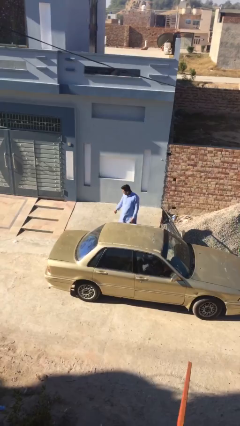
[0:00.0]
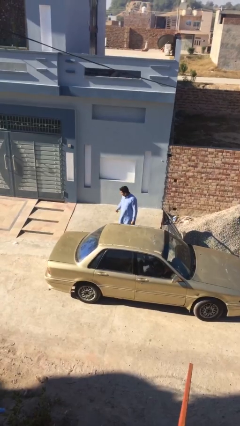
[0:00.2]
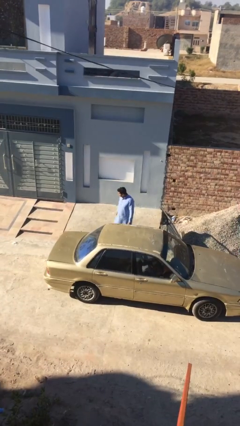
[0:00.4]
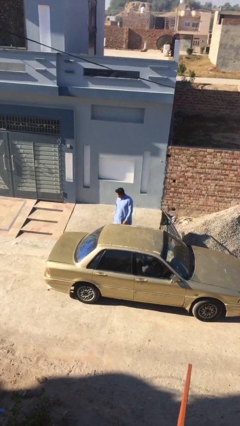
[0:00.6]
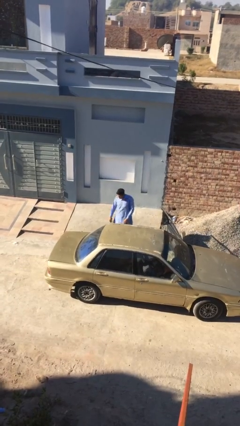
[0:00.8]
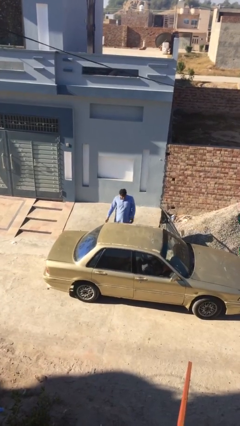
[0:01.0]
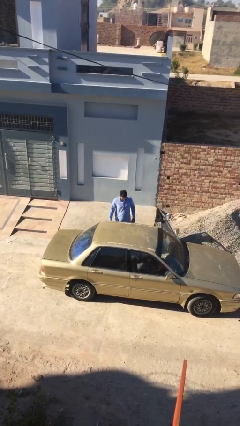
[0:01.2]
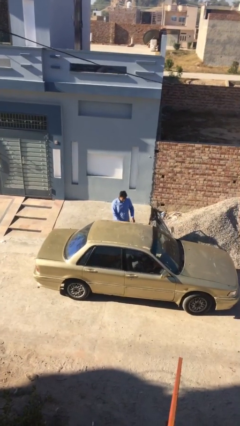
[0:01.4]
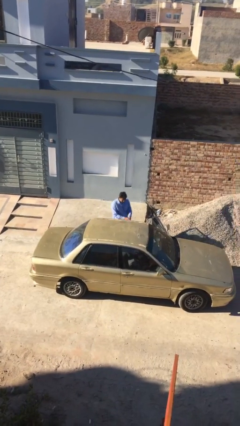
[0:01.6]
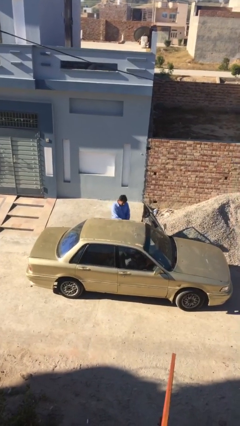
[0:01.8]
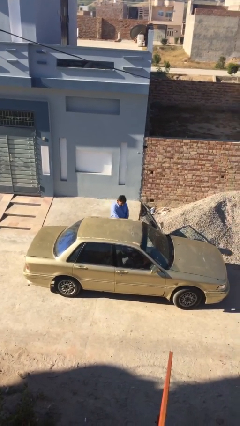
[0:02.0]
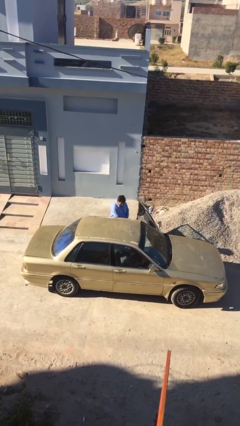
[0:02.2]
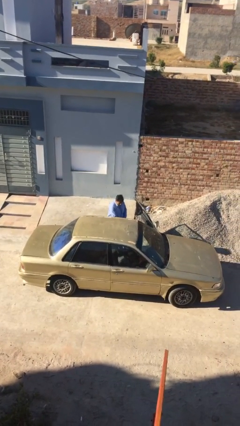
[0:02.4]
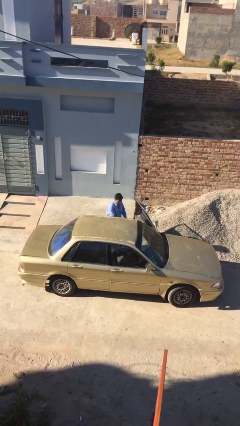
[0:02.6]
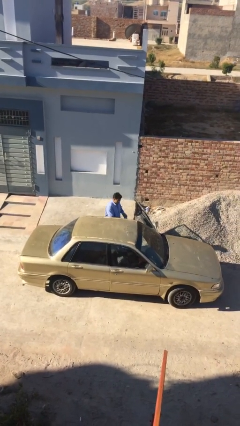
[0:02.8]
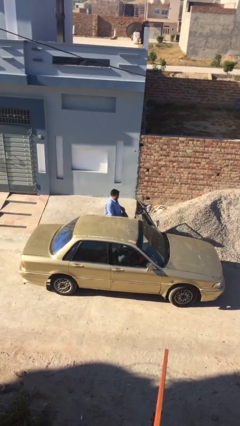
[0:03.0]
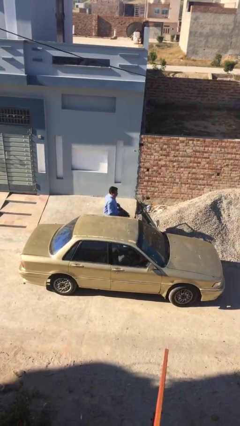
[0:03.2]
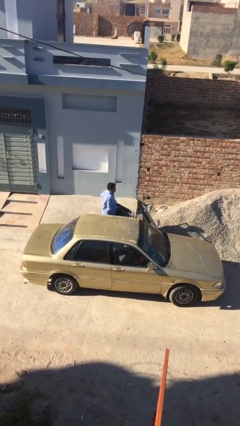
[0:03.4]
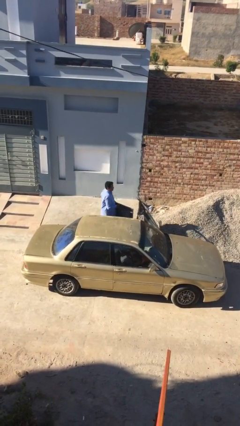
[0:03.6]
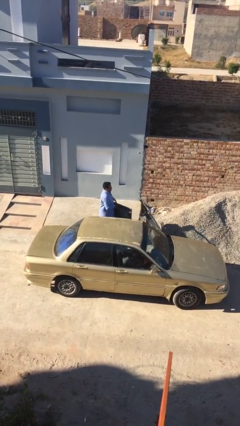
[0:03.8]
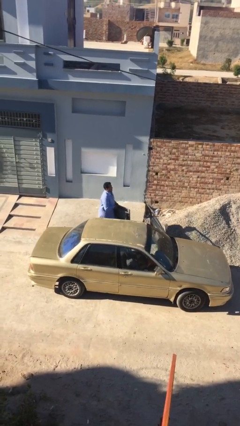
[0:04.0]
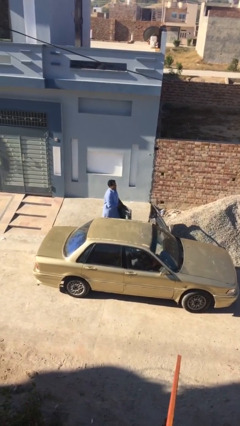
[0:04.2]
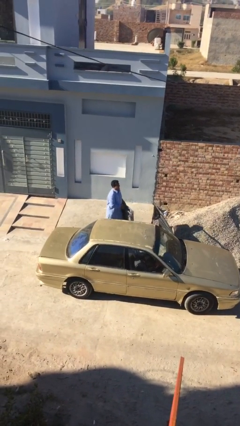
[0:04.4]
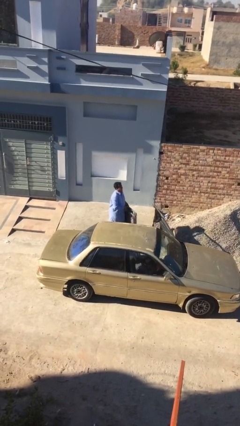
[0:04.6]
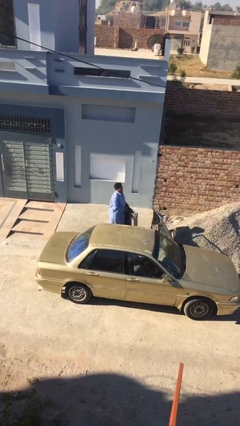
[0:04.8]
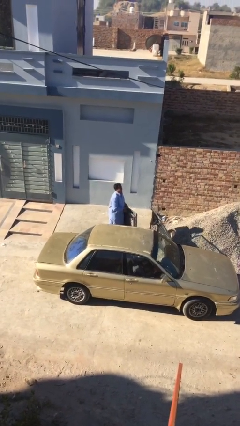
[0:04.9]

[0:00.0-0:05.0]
person unloads car

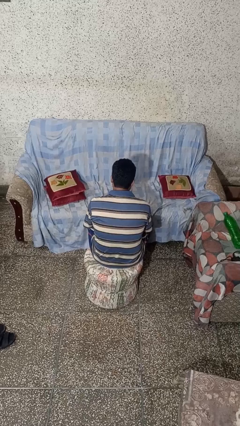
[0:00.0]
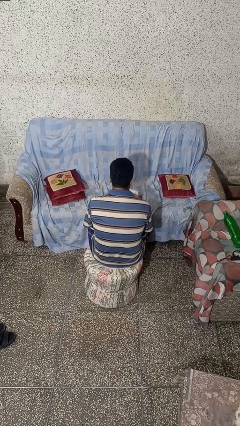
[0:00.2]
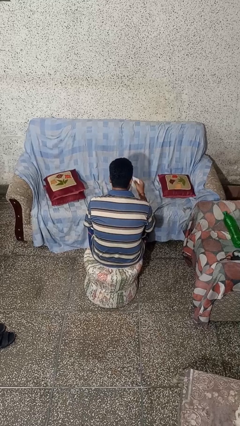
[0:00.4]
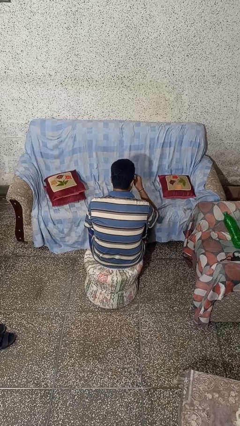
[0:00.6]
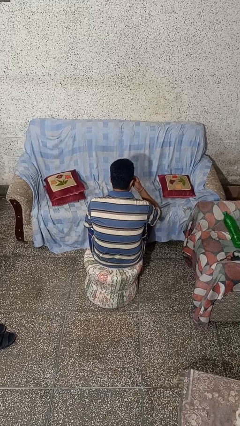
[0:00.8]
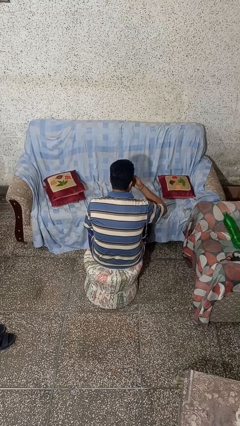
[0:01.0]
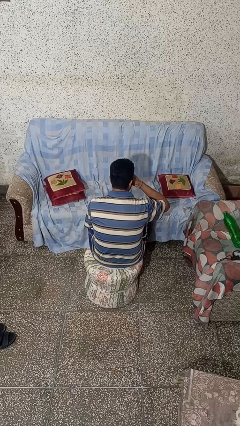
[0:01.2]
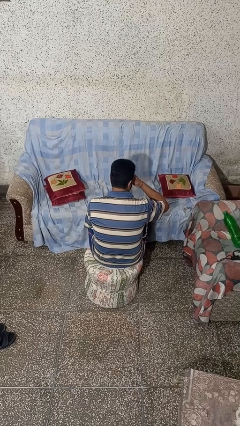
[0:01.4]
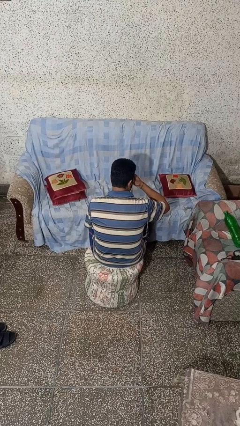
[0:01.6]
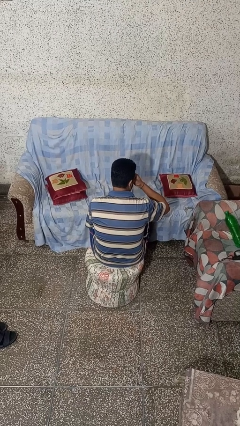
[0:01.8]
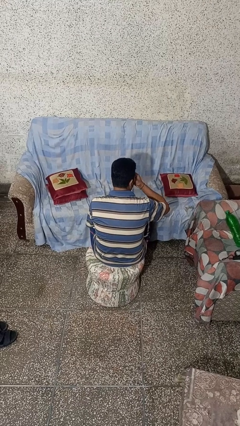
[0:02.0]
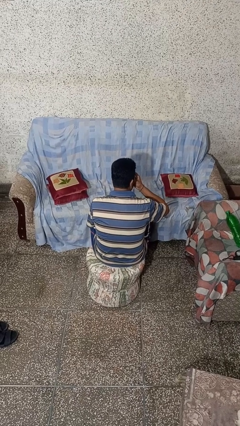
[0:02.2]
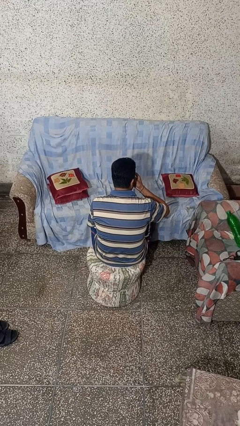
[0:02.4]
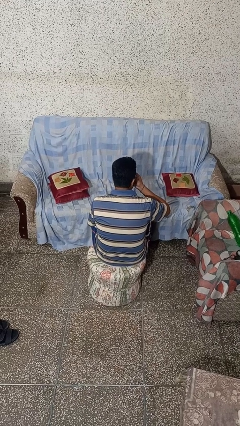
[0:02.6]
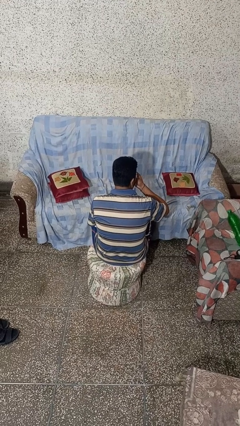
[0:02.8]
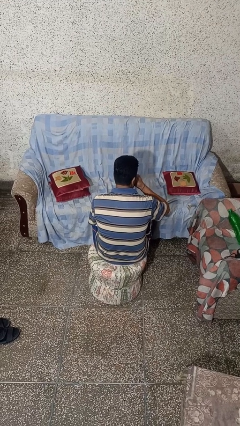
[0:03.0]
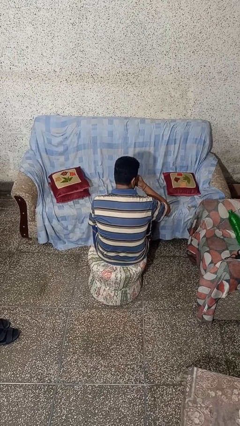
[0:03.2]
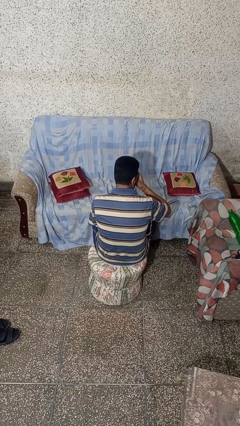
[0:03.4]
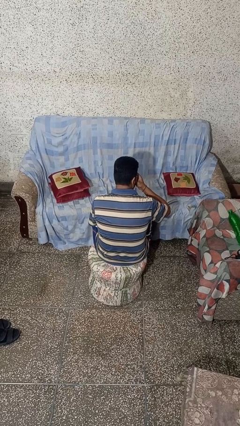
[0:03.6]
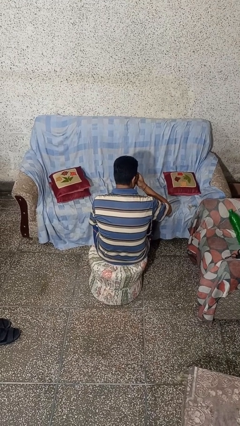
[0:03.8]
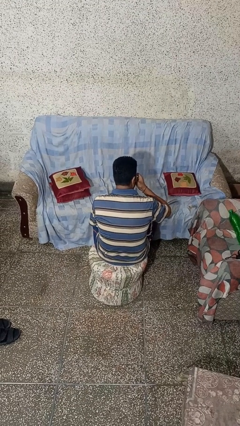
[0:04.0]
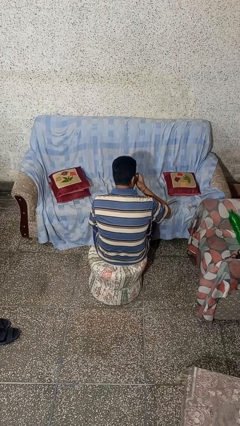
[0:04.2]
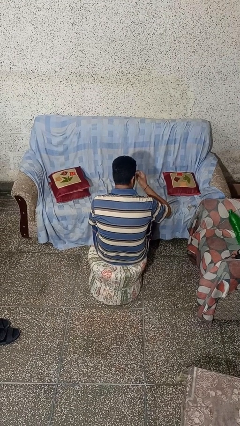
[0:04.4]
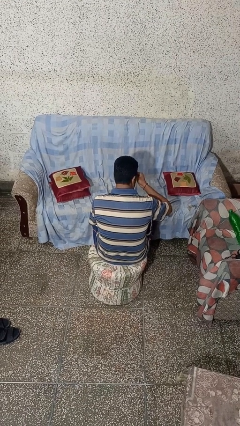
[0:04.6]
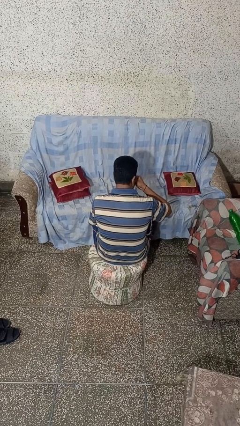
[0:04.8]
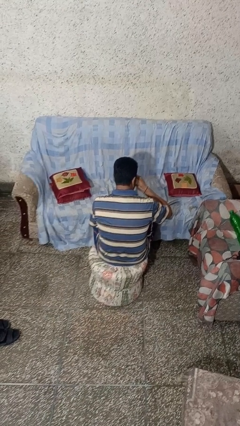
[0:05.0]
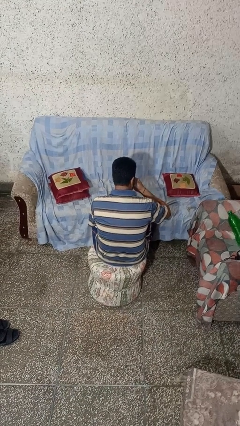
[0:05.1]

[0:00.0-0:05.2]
person blows nose

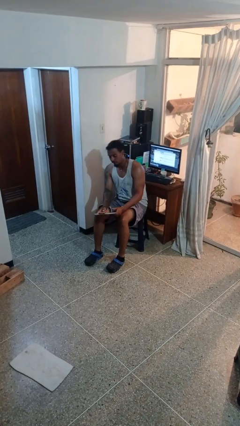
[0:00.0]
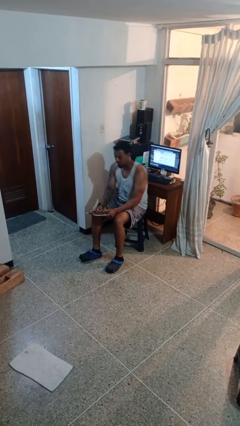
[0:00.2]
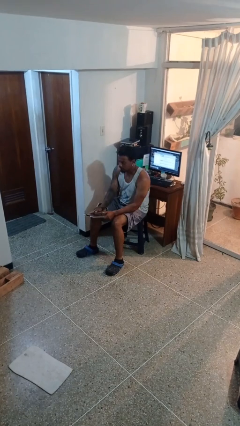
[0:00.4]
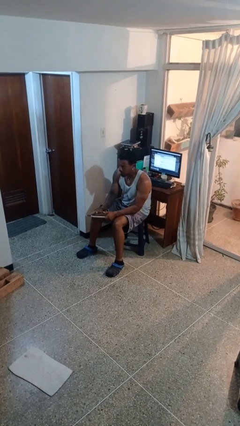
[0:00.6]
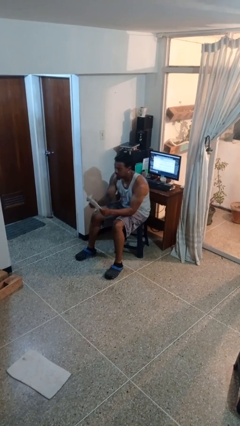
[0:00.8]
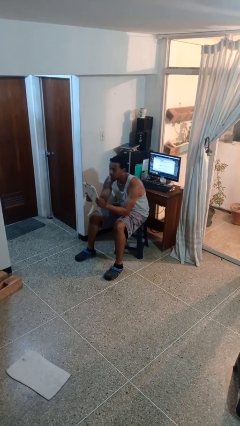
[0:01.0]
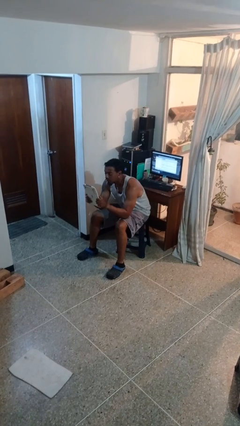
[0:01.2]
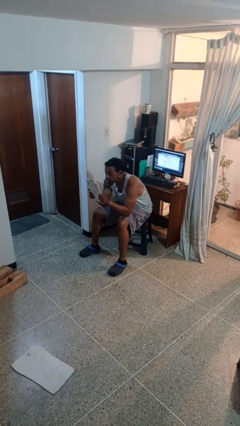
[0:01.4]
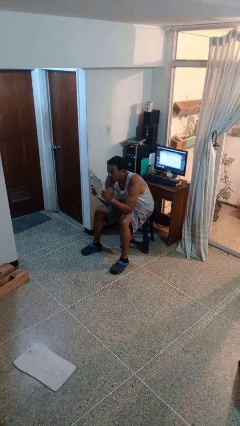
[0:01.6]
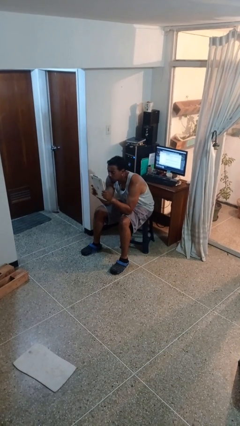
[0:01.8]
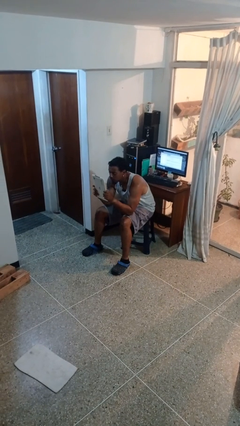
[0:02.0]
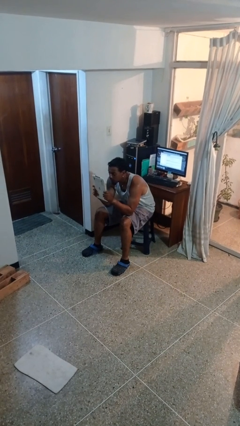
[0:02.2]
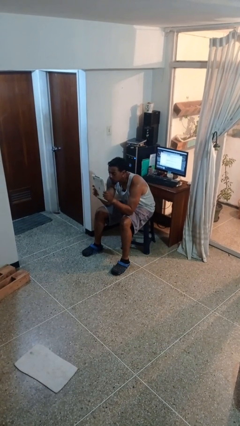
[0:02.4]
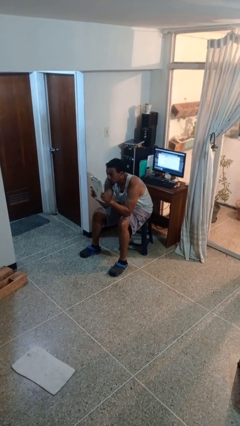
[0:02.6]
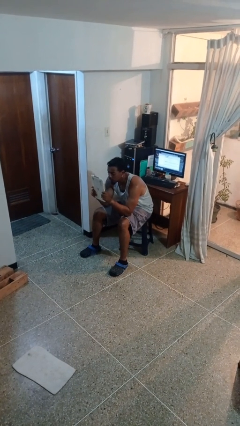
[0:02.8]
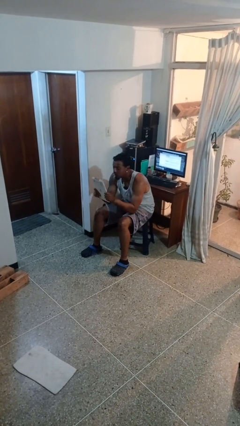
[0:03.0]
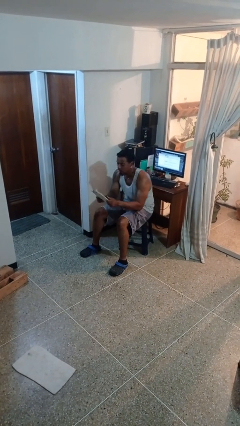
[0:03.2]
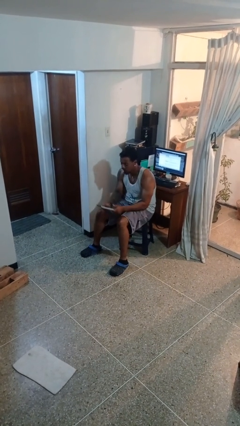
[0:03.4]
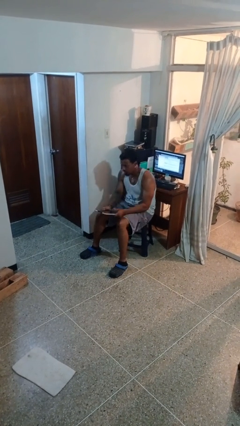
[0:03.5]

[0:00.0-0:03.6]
person interacts with tablet

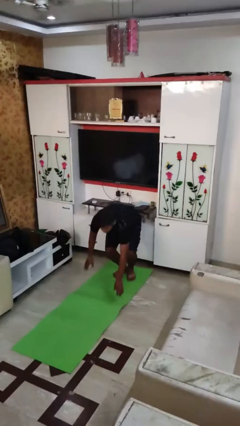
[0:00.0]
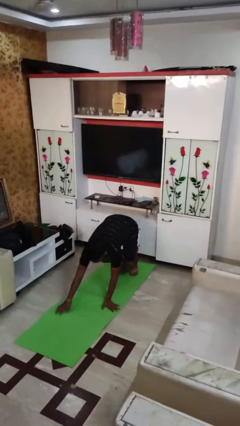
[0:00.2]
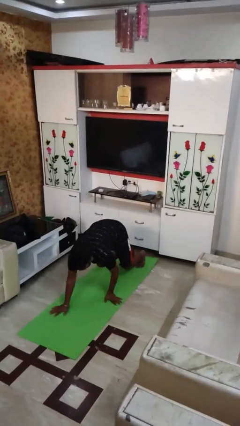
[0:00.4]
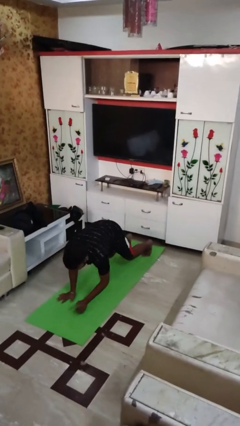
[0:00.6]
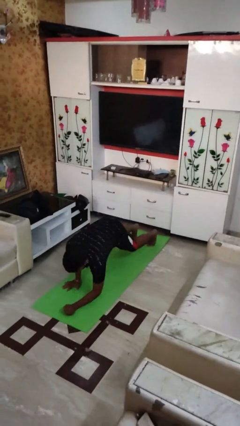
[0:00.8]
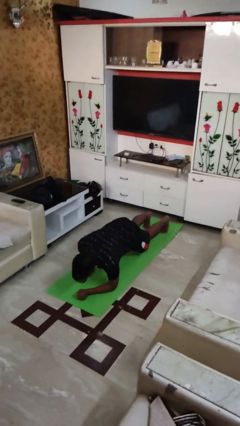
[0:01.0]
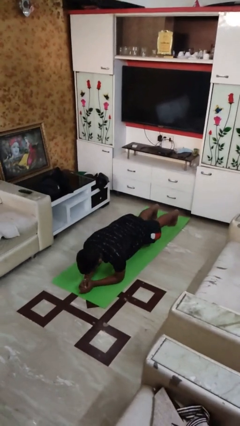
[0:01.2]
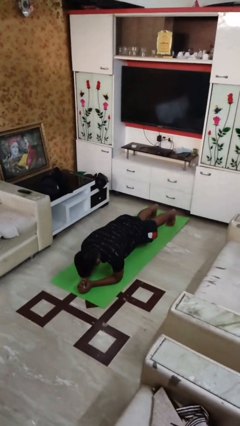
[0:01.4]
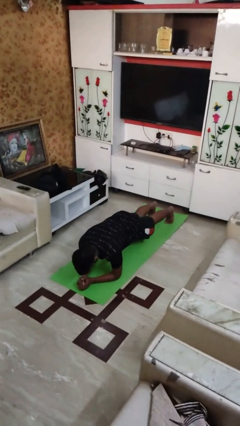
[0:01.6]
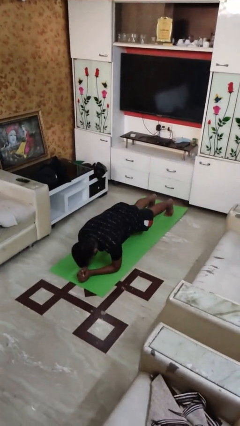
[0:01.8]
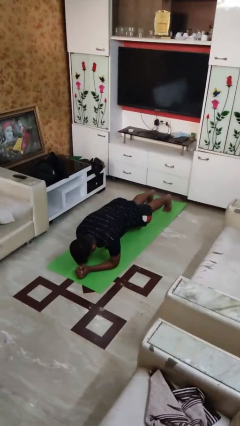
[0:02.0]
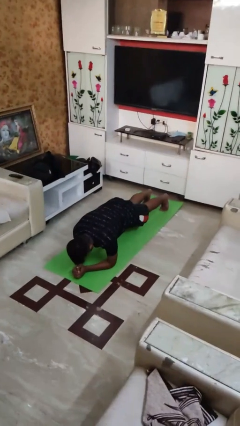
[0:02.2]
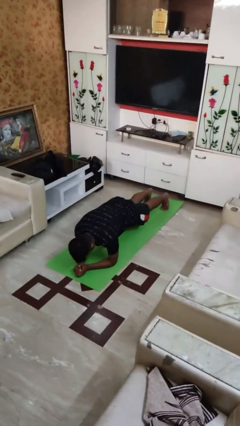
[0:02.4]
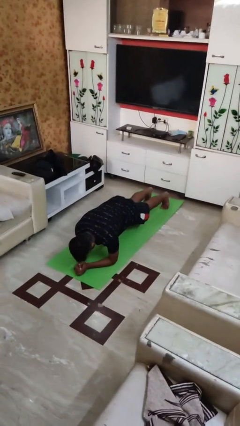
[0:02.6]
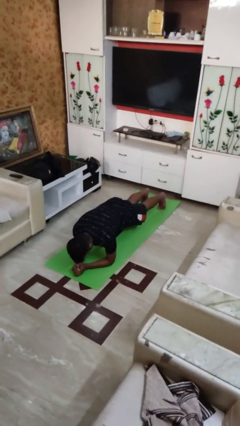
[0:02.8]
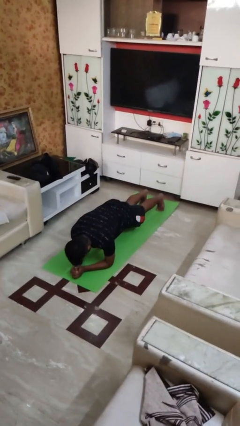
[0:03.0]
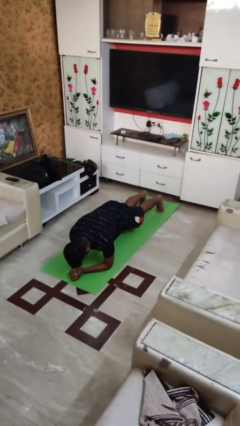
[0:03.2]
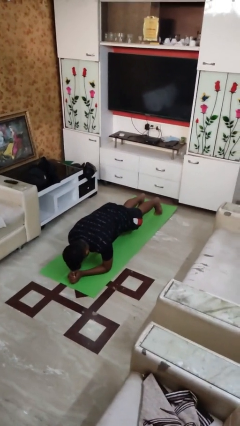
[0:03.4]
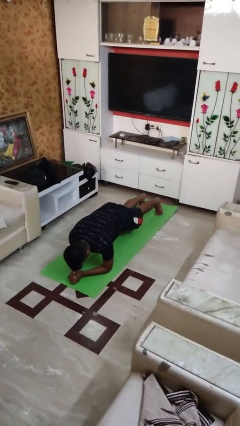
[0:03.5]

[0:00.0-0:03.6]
person exercises with plank

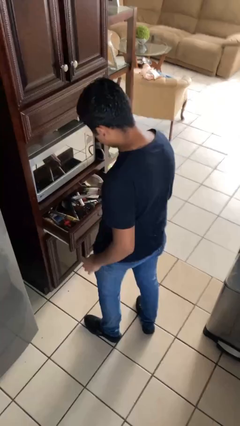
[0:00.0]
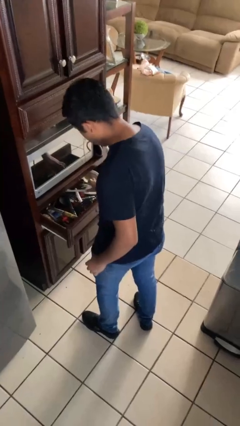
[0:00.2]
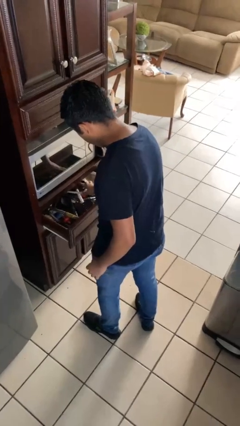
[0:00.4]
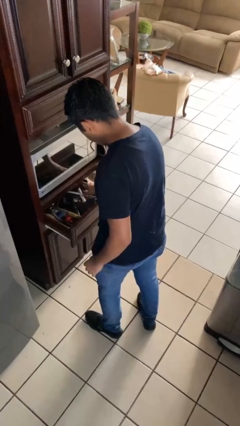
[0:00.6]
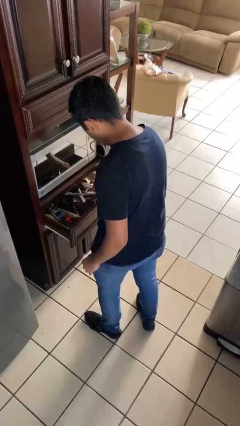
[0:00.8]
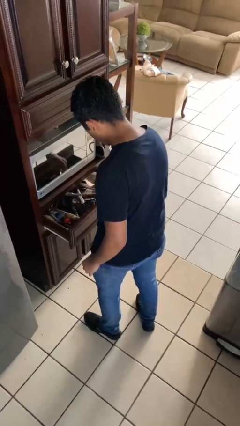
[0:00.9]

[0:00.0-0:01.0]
person puts object into kitchen drawer
